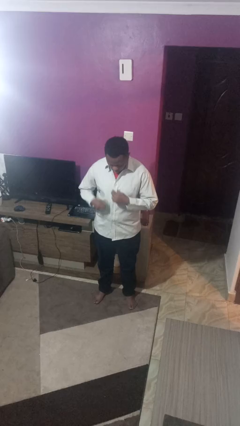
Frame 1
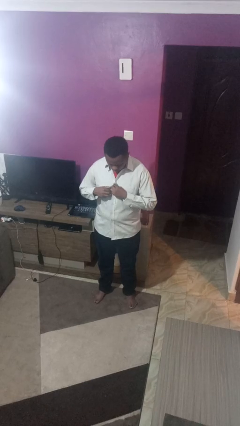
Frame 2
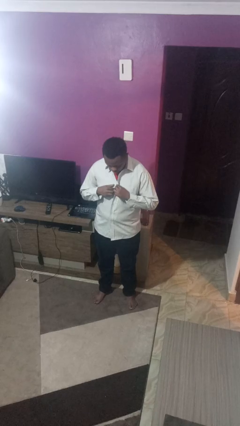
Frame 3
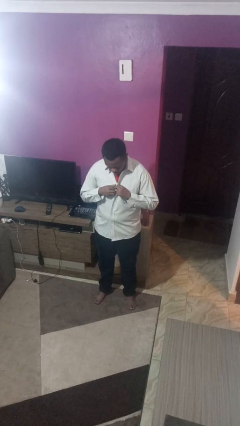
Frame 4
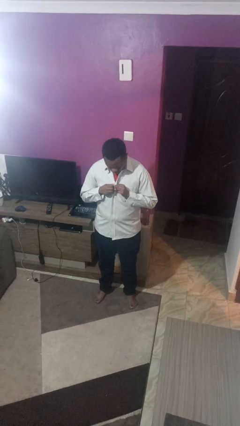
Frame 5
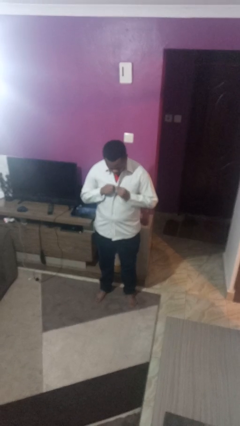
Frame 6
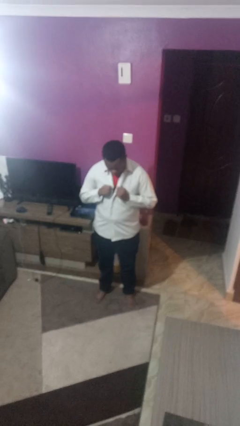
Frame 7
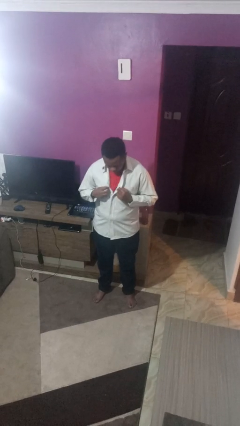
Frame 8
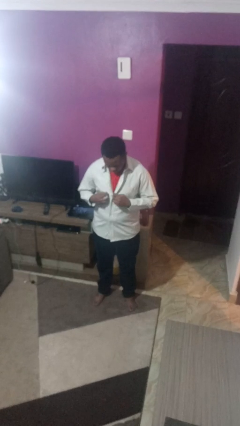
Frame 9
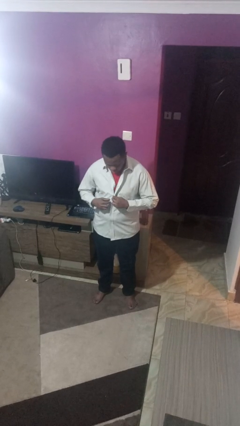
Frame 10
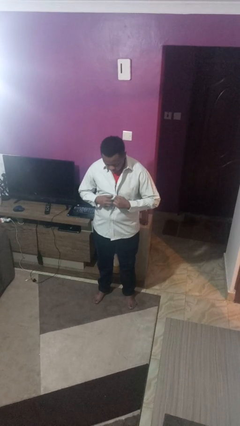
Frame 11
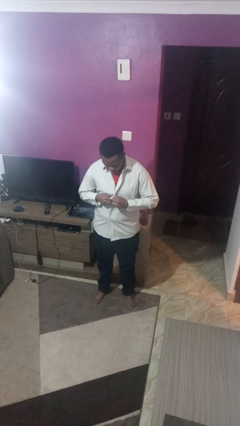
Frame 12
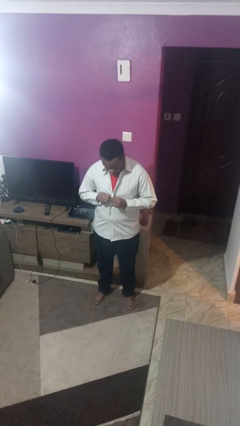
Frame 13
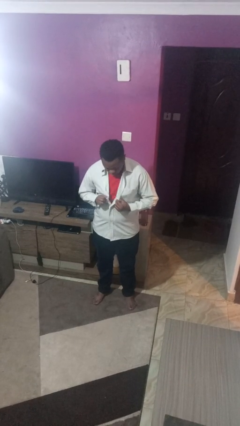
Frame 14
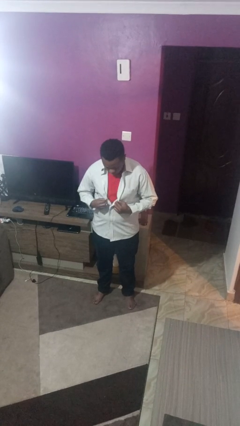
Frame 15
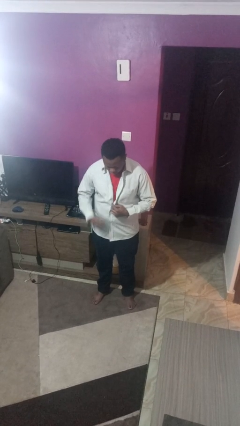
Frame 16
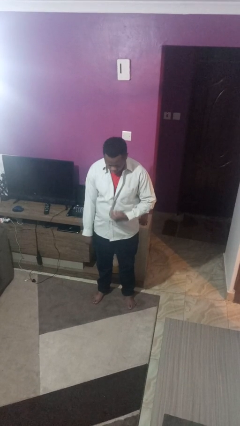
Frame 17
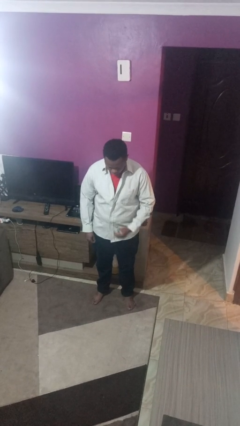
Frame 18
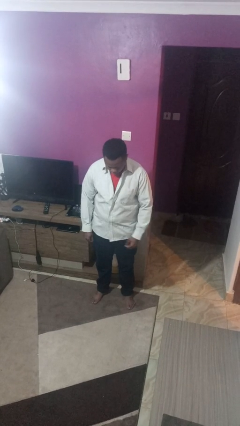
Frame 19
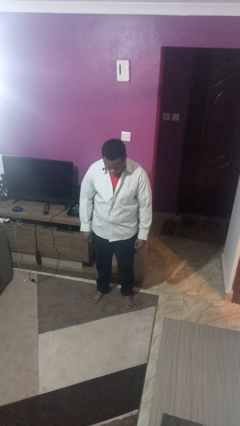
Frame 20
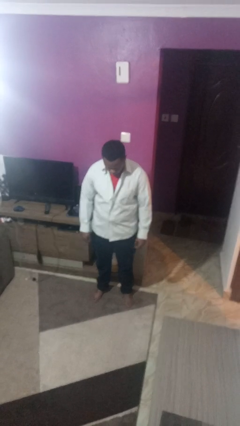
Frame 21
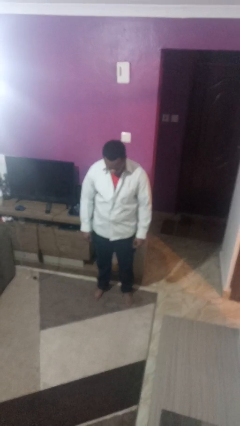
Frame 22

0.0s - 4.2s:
person unbuttons shirt

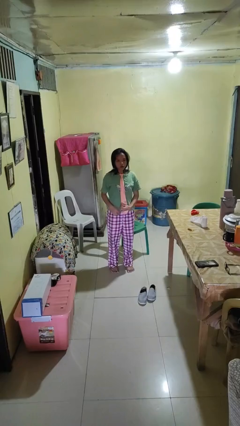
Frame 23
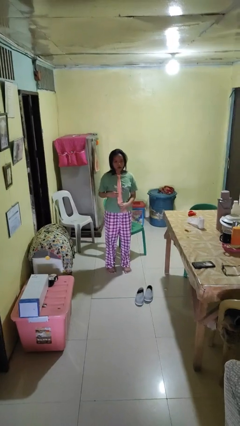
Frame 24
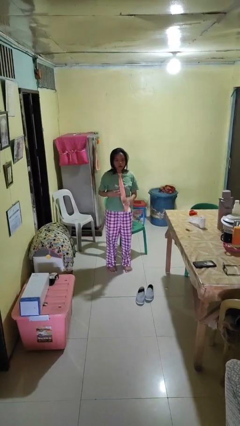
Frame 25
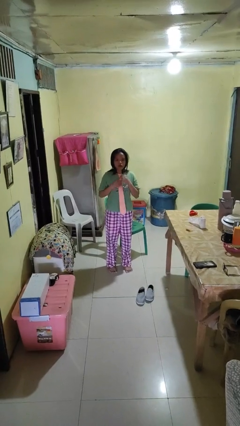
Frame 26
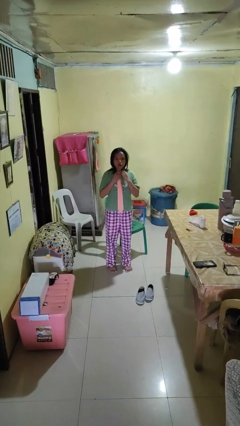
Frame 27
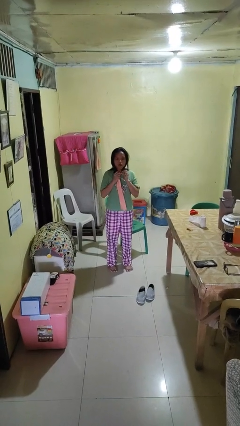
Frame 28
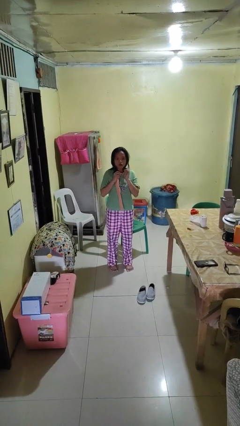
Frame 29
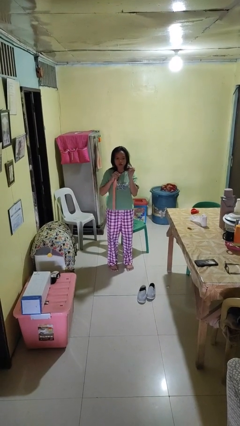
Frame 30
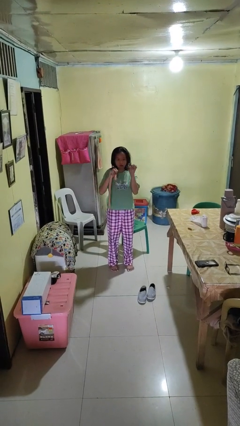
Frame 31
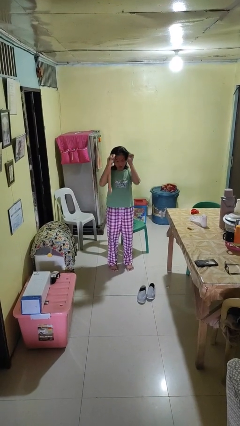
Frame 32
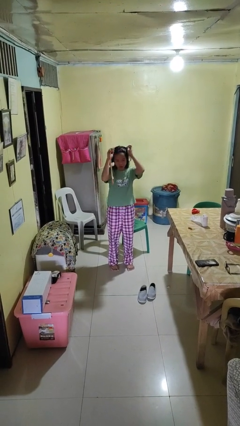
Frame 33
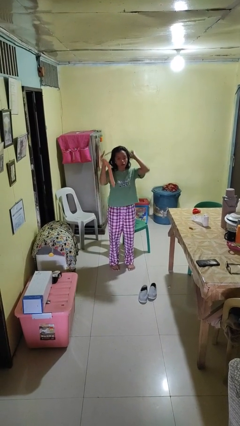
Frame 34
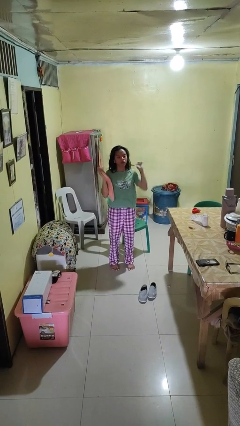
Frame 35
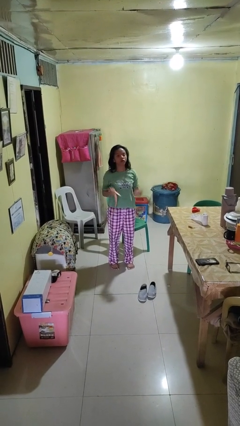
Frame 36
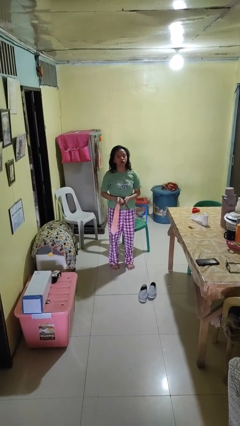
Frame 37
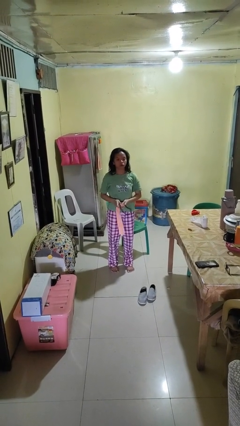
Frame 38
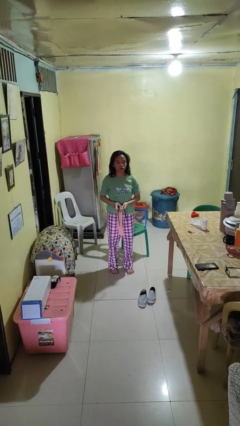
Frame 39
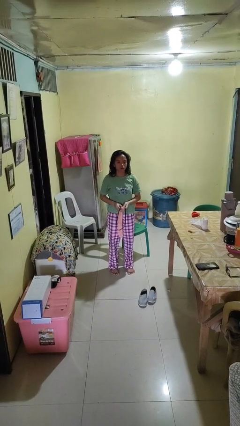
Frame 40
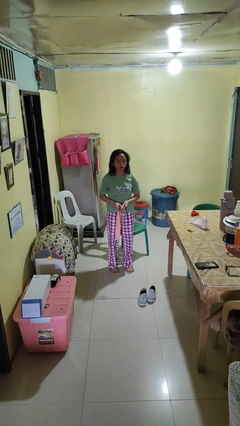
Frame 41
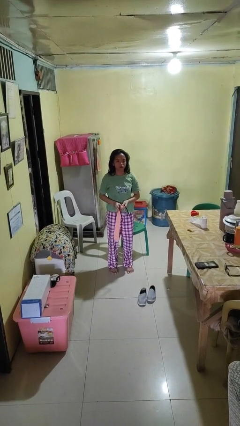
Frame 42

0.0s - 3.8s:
person takes off necktie

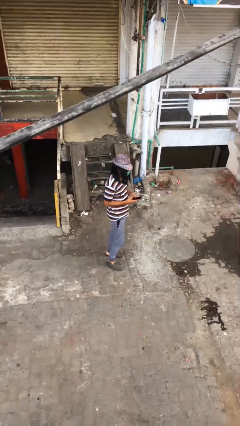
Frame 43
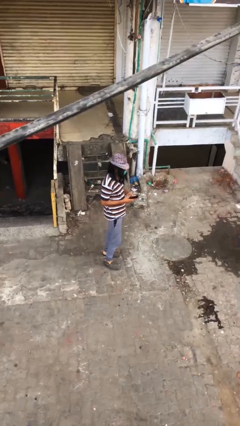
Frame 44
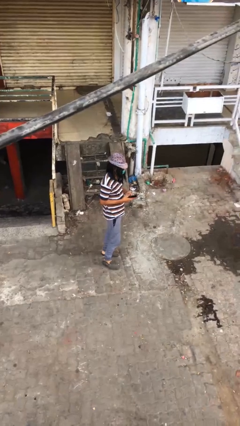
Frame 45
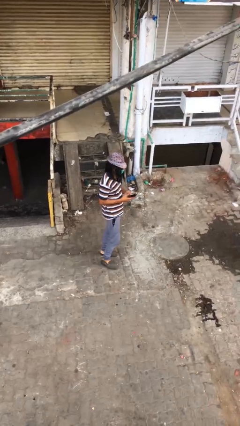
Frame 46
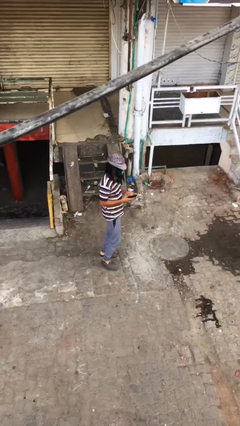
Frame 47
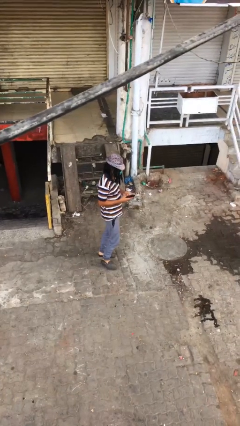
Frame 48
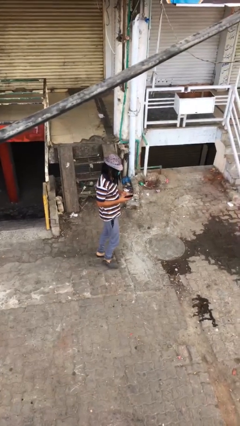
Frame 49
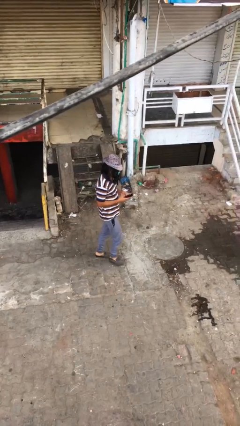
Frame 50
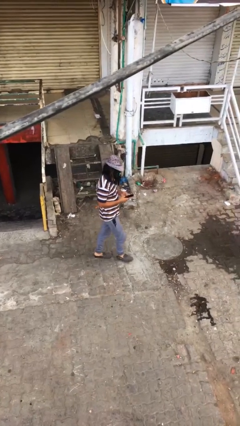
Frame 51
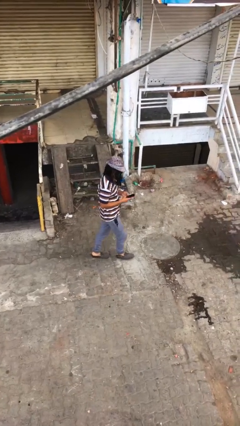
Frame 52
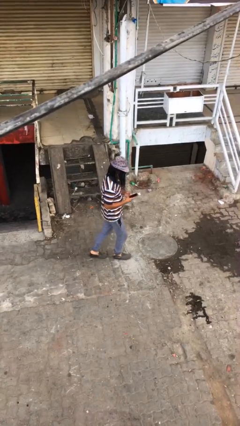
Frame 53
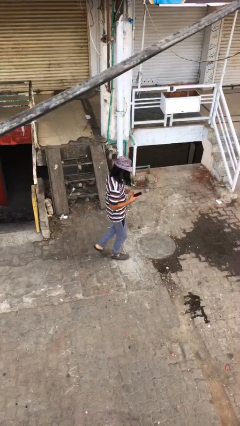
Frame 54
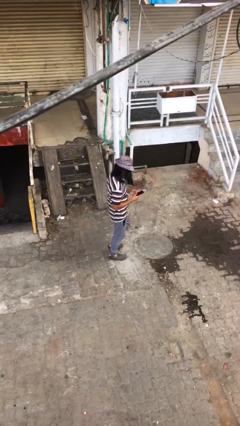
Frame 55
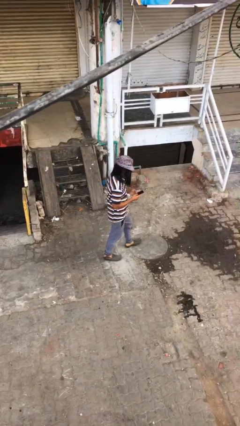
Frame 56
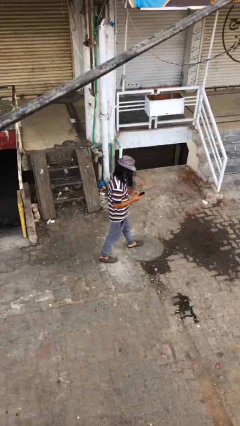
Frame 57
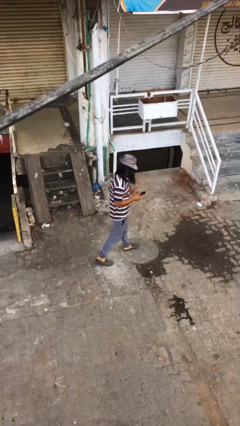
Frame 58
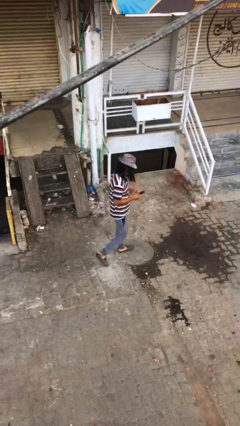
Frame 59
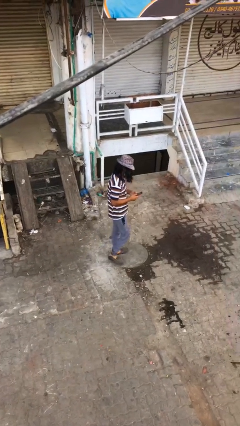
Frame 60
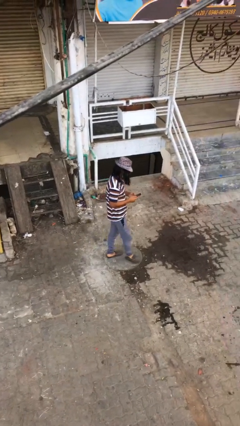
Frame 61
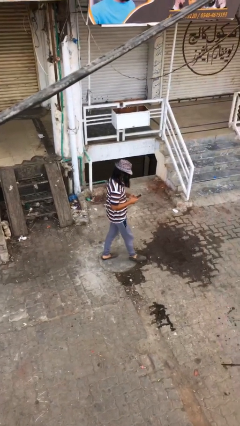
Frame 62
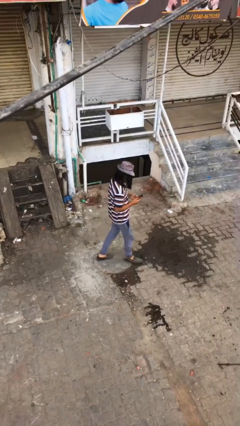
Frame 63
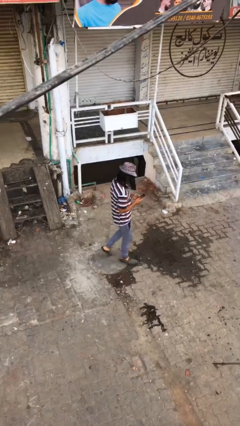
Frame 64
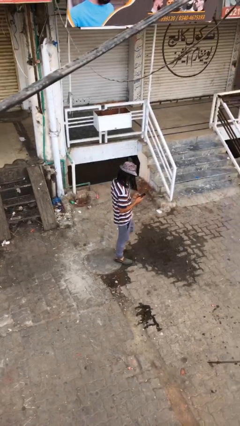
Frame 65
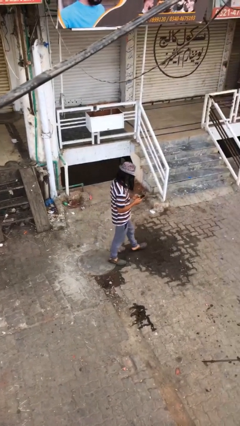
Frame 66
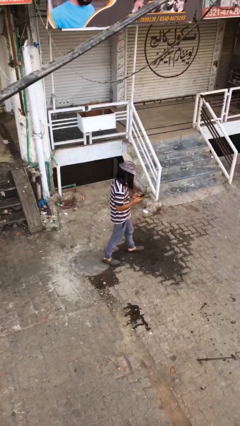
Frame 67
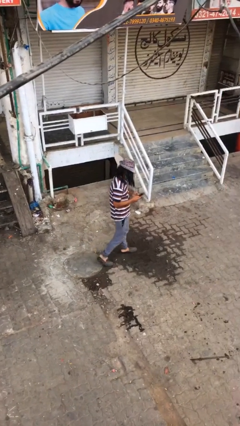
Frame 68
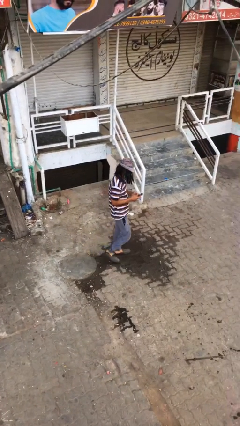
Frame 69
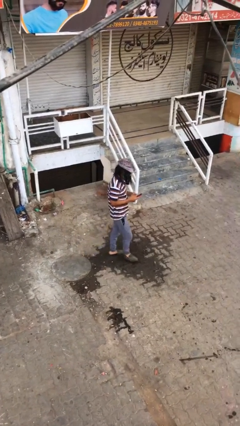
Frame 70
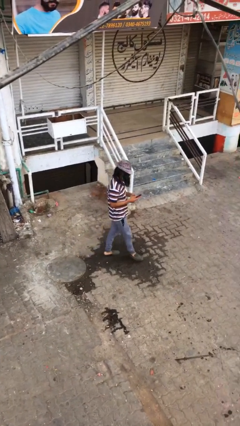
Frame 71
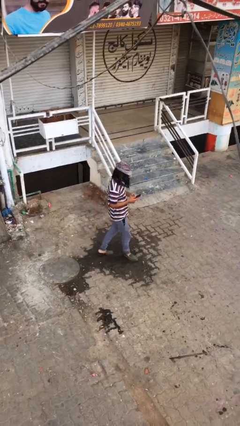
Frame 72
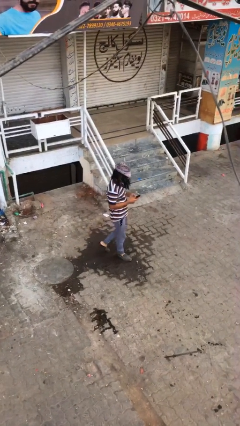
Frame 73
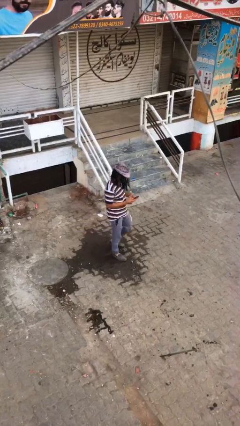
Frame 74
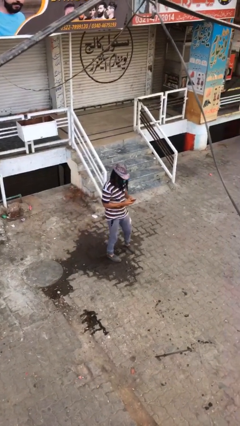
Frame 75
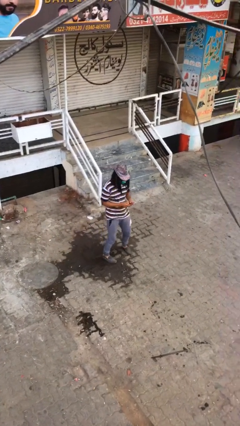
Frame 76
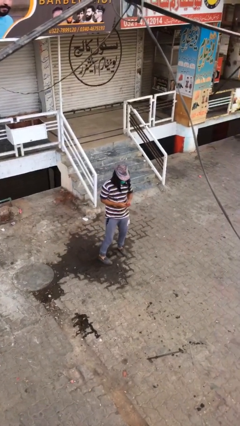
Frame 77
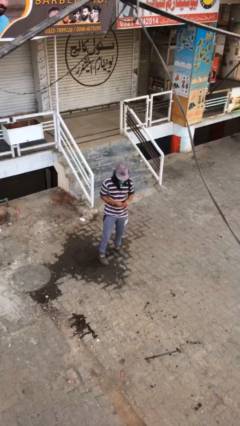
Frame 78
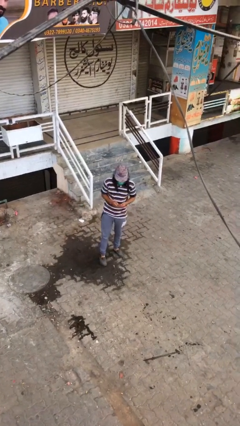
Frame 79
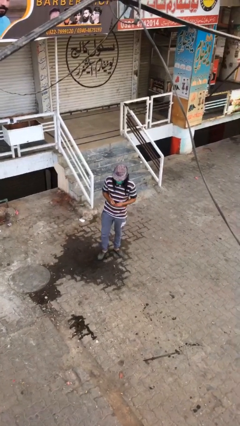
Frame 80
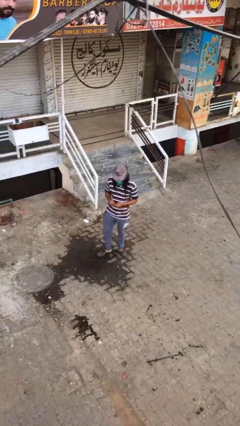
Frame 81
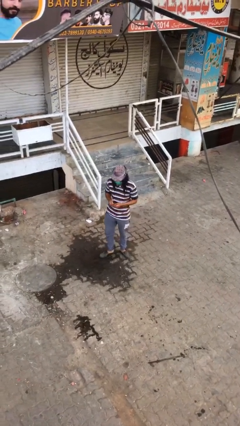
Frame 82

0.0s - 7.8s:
person texts on phone

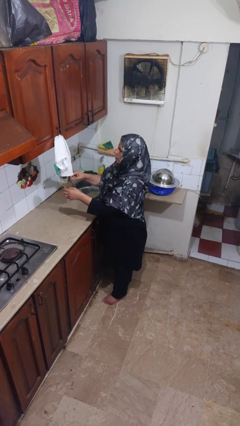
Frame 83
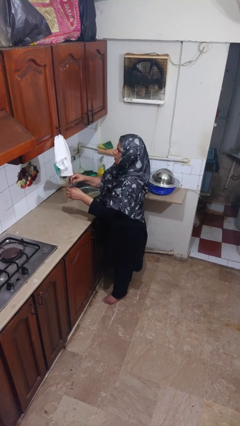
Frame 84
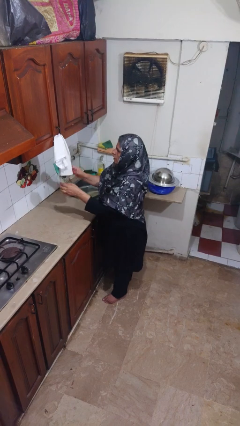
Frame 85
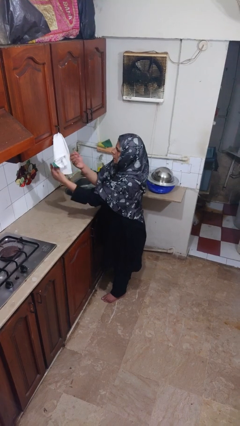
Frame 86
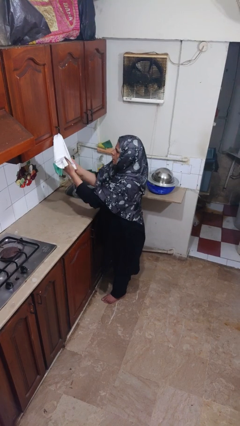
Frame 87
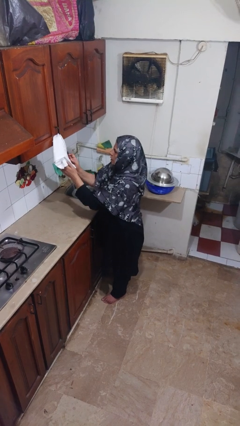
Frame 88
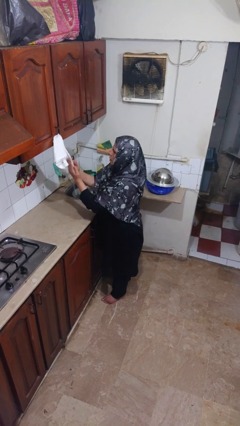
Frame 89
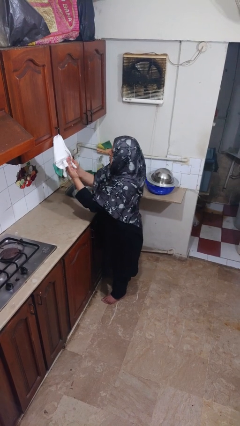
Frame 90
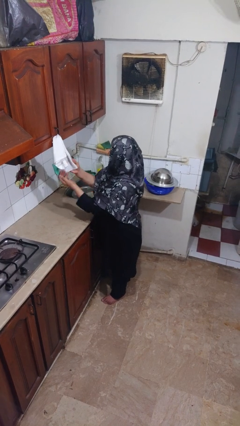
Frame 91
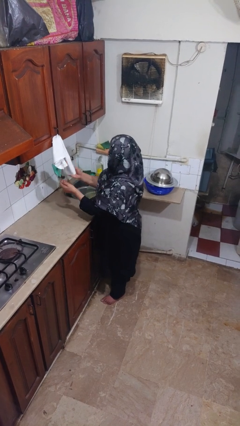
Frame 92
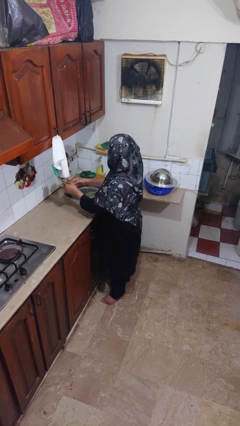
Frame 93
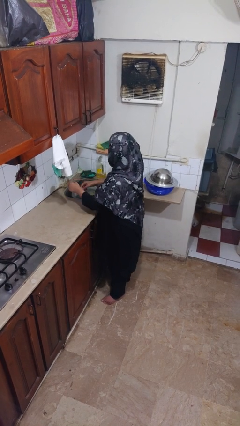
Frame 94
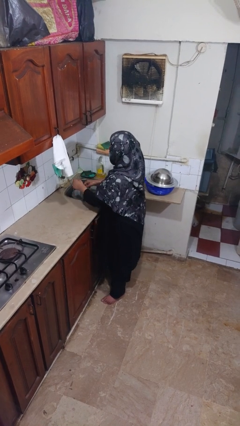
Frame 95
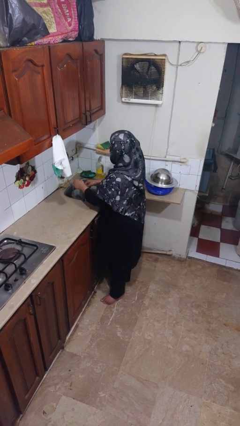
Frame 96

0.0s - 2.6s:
person dries hands with towel
